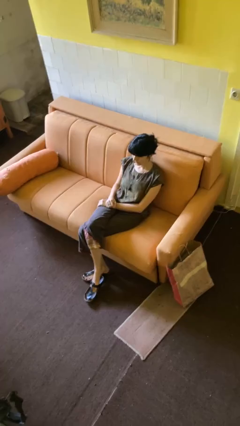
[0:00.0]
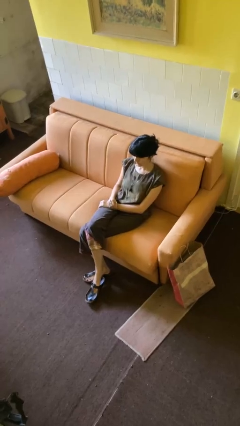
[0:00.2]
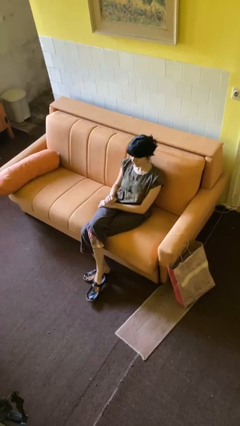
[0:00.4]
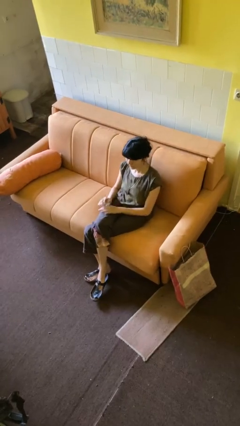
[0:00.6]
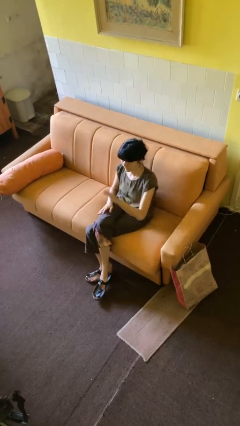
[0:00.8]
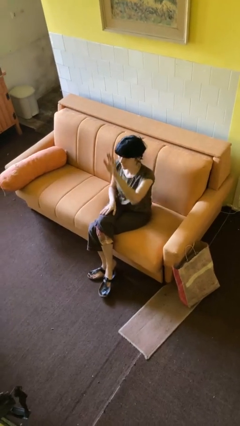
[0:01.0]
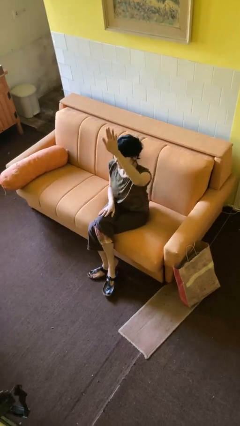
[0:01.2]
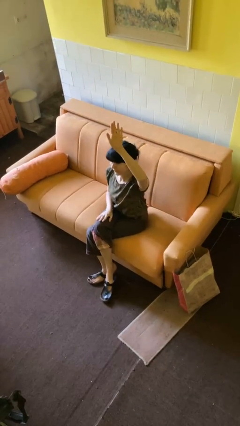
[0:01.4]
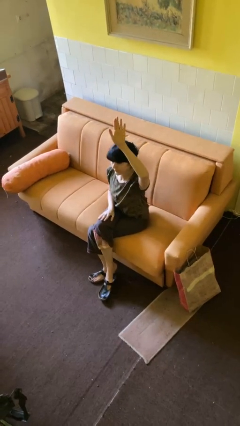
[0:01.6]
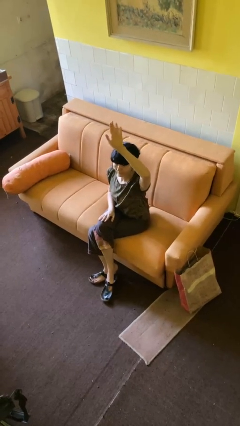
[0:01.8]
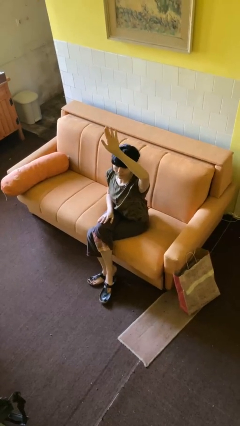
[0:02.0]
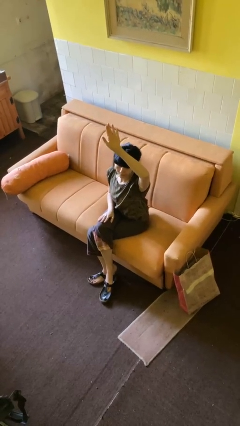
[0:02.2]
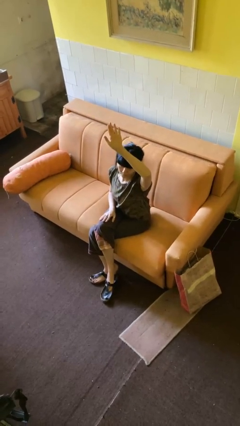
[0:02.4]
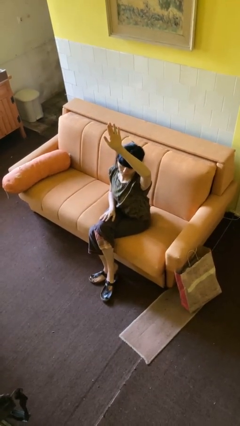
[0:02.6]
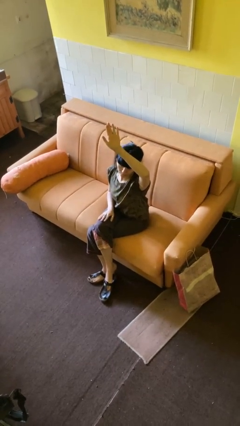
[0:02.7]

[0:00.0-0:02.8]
person gestures raise hand

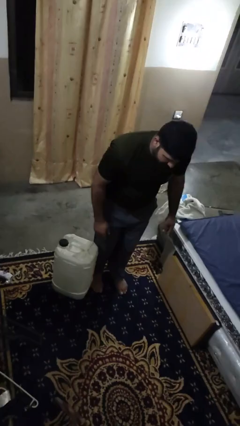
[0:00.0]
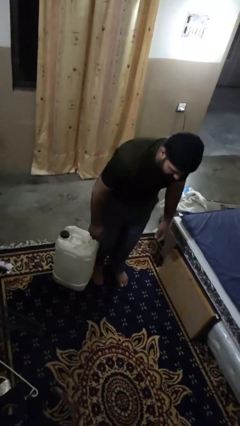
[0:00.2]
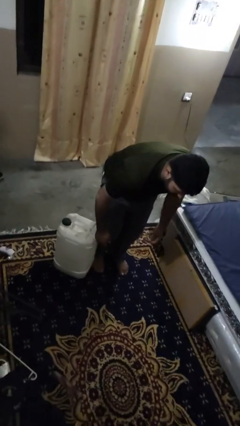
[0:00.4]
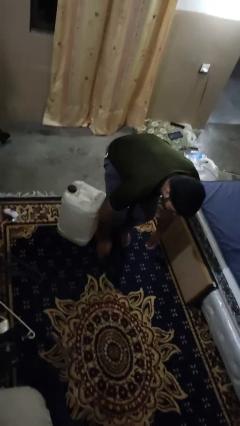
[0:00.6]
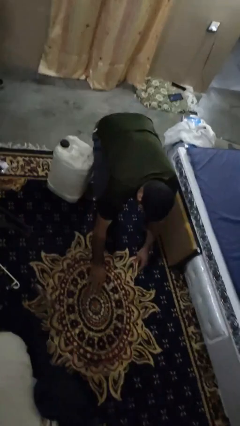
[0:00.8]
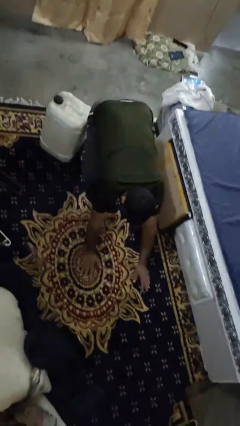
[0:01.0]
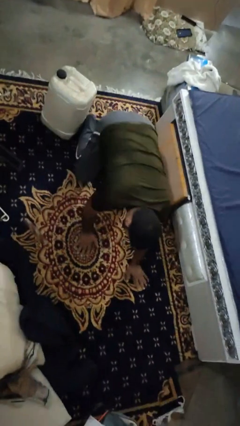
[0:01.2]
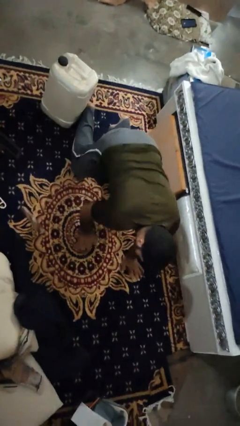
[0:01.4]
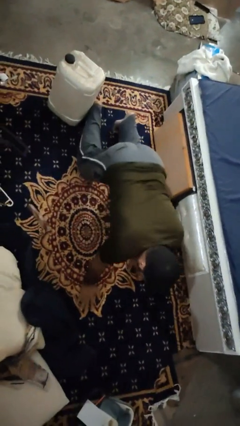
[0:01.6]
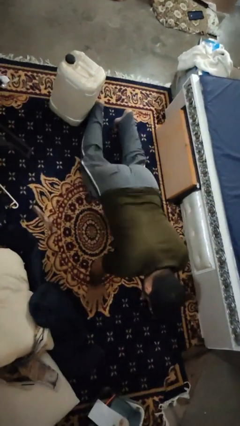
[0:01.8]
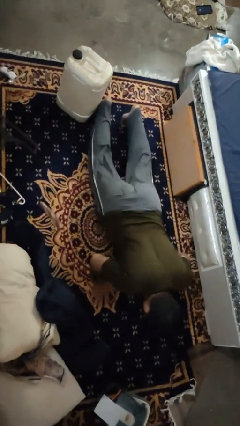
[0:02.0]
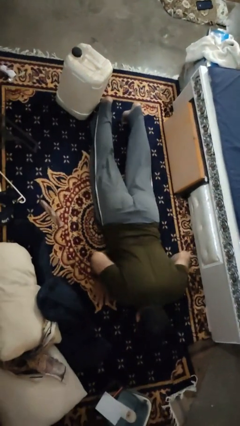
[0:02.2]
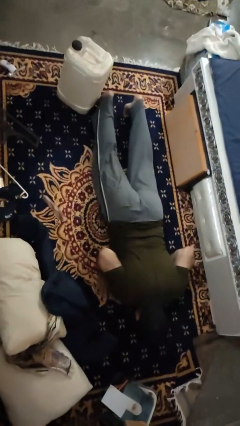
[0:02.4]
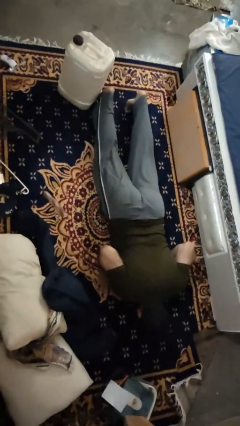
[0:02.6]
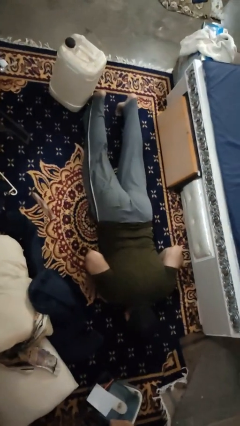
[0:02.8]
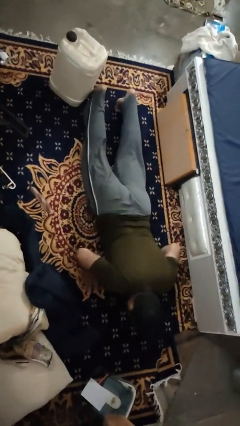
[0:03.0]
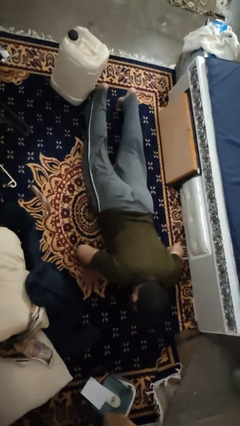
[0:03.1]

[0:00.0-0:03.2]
person lies down on floor

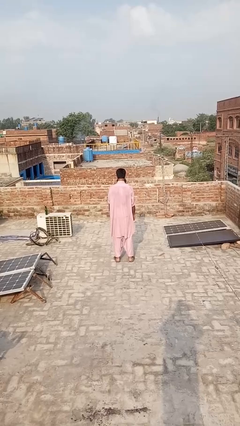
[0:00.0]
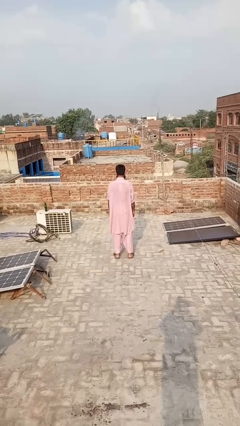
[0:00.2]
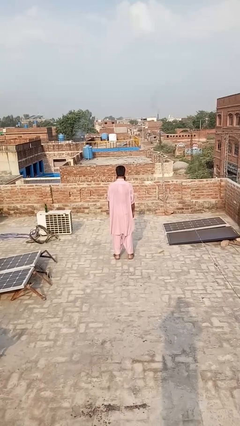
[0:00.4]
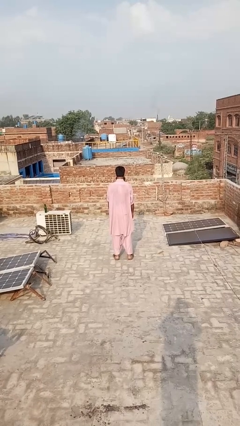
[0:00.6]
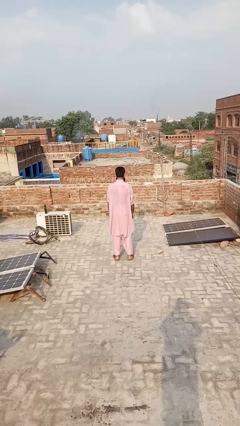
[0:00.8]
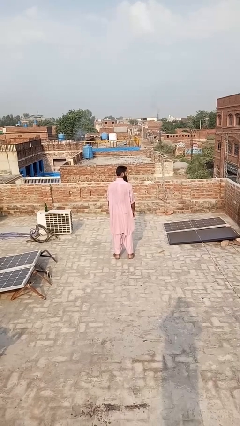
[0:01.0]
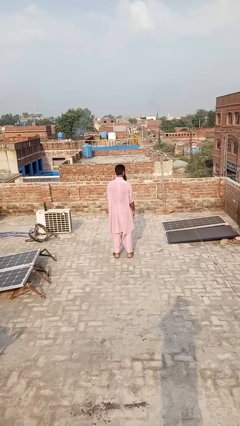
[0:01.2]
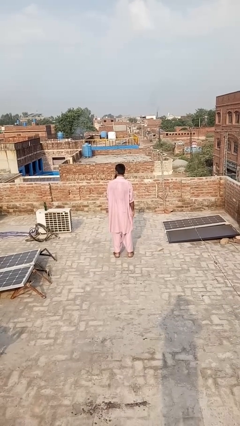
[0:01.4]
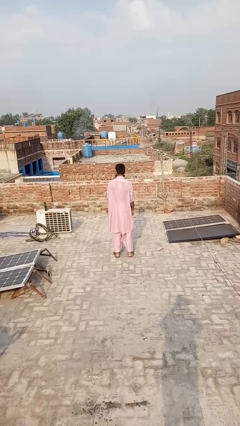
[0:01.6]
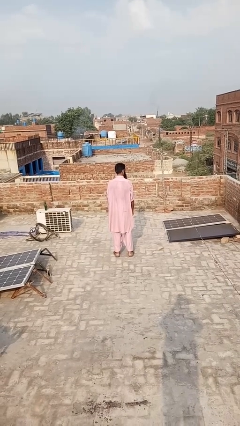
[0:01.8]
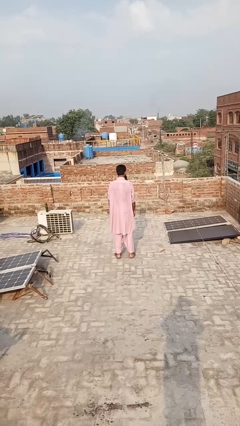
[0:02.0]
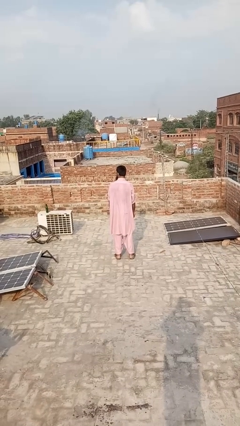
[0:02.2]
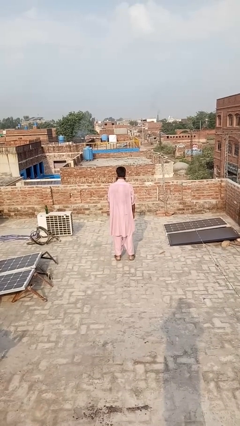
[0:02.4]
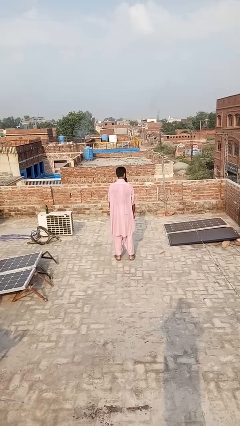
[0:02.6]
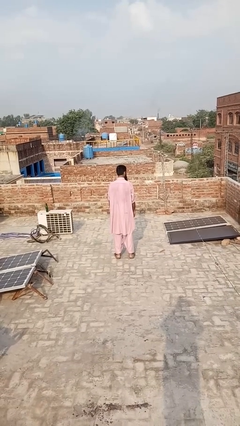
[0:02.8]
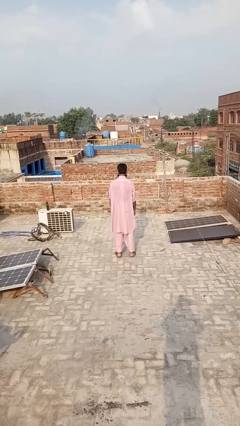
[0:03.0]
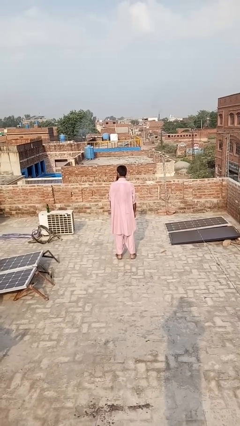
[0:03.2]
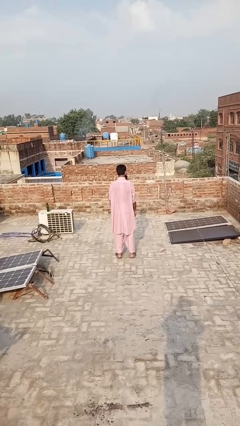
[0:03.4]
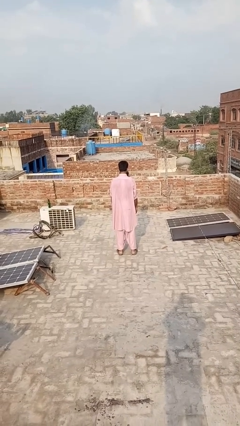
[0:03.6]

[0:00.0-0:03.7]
person shakes head

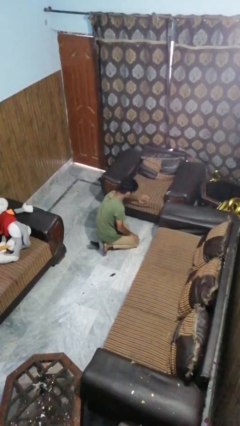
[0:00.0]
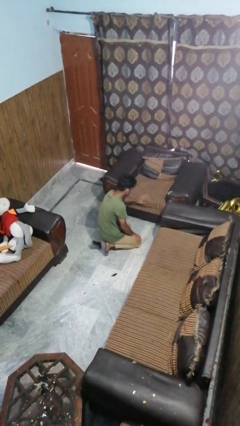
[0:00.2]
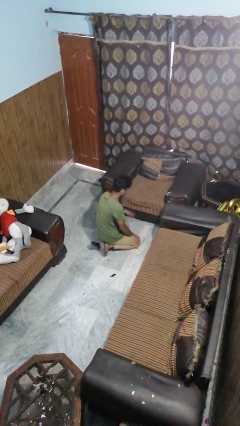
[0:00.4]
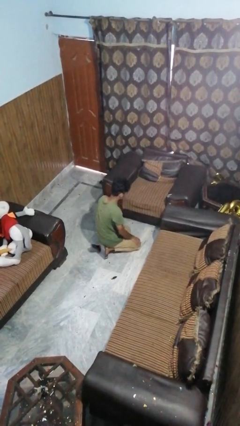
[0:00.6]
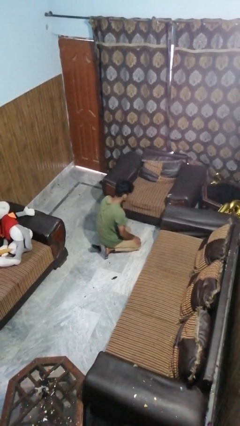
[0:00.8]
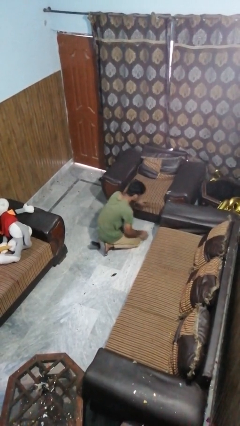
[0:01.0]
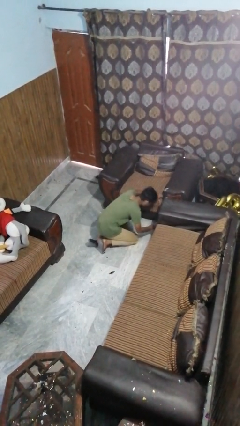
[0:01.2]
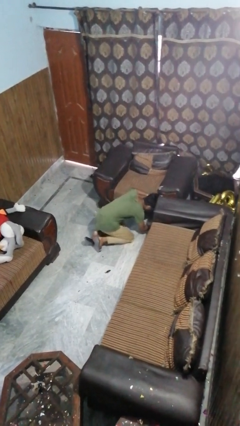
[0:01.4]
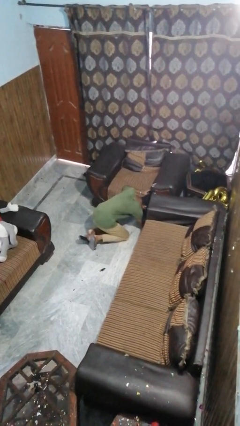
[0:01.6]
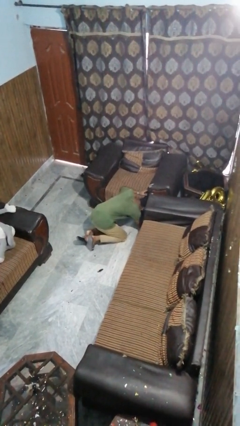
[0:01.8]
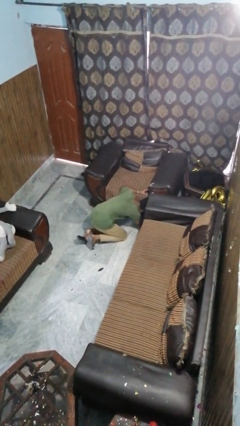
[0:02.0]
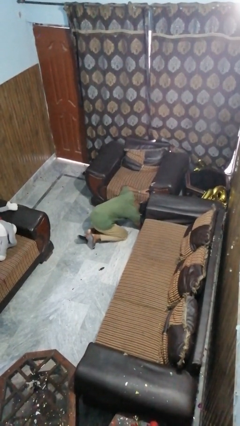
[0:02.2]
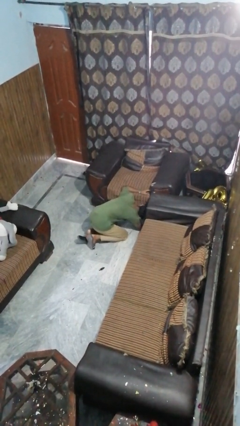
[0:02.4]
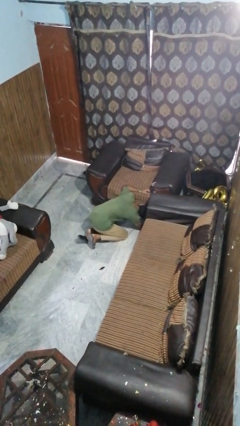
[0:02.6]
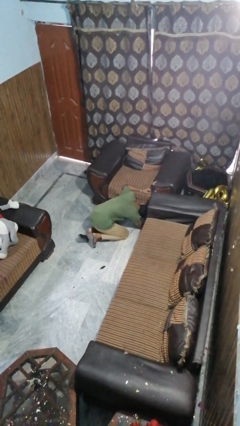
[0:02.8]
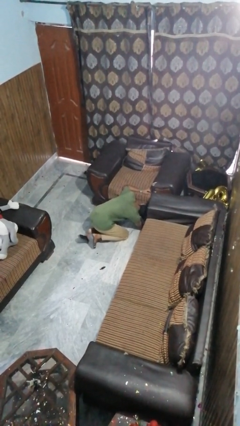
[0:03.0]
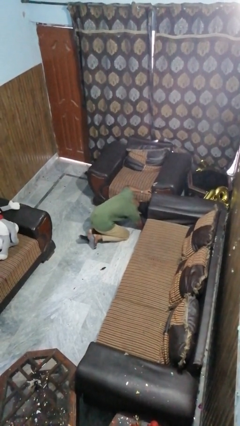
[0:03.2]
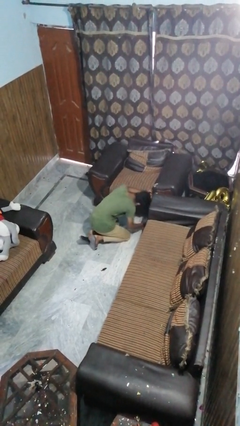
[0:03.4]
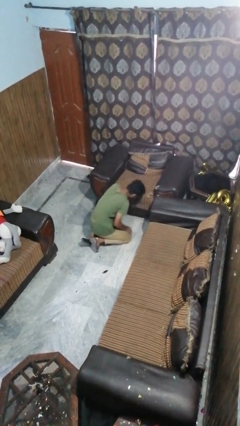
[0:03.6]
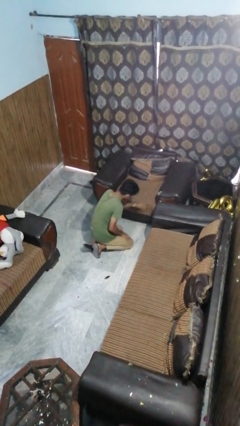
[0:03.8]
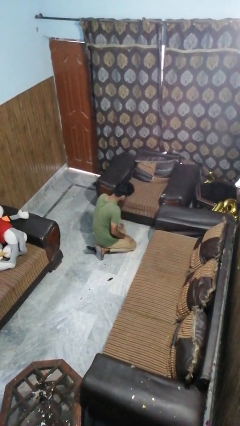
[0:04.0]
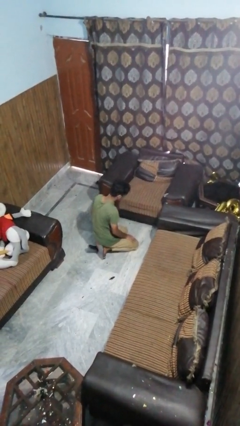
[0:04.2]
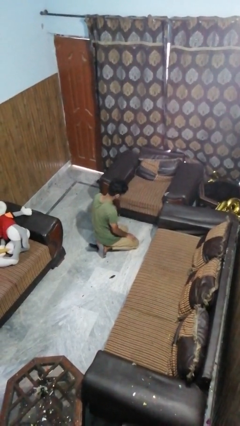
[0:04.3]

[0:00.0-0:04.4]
person searches under couch

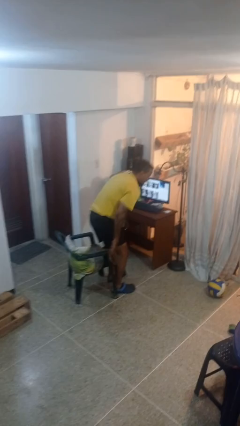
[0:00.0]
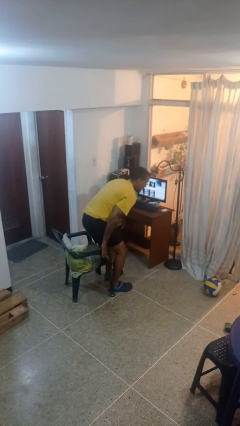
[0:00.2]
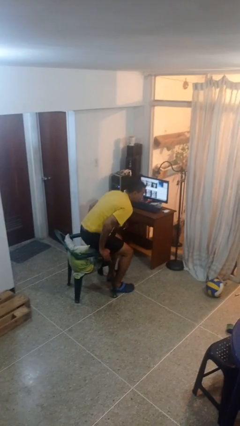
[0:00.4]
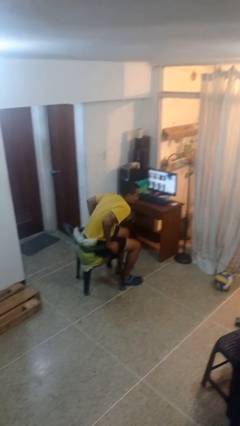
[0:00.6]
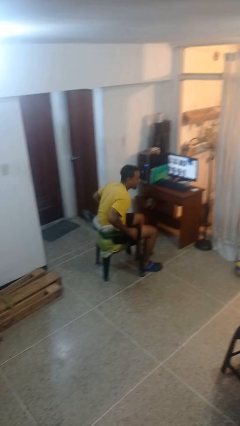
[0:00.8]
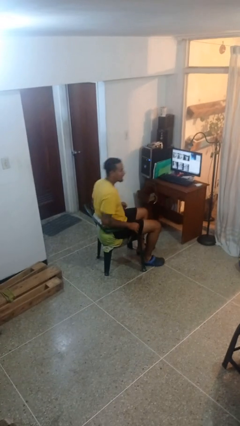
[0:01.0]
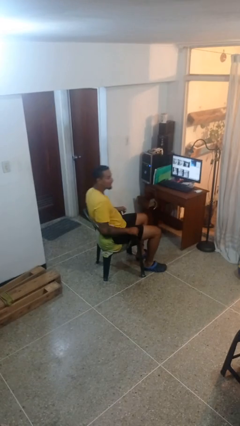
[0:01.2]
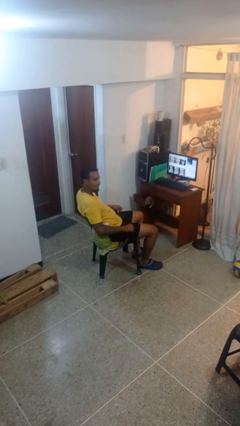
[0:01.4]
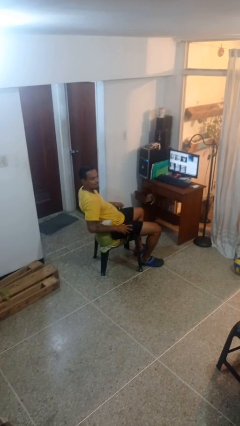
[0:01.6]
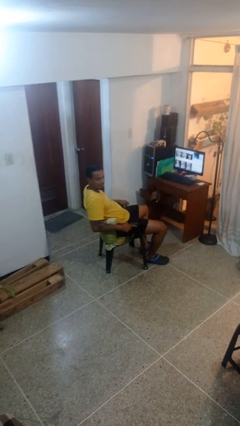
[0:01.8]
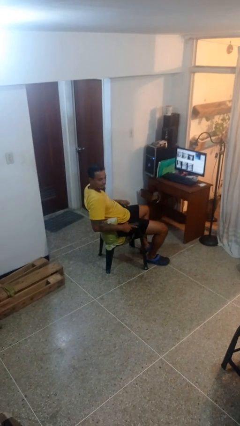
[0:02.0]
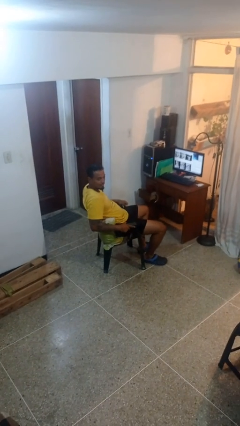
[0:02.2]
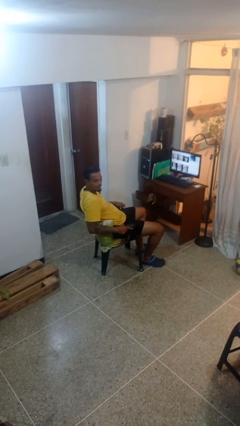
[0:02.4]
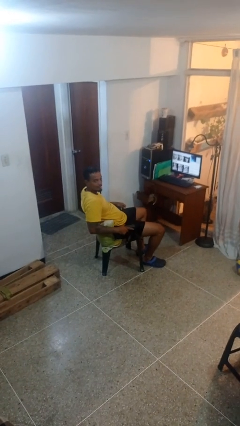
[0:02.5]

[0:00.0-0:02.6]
person sits down

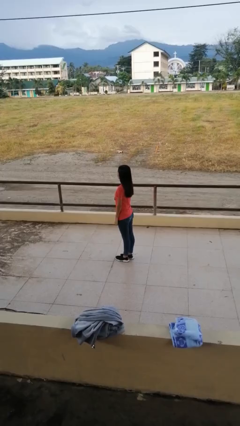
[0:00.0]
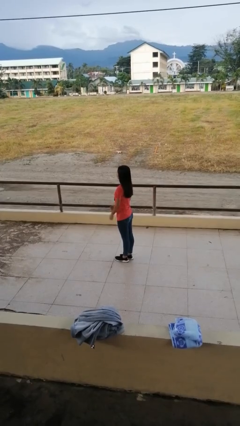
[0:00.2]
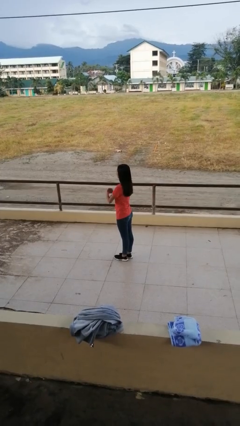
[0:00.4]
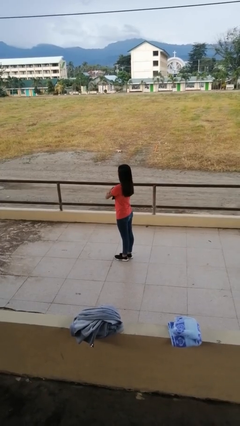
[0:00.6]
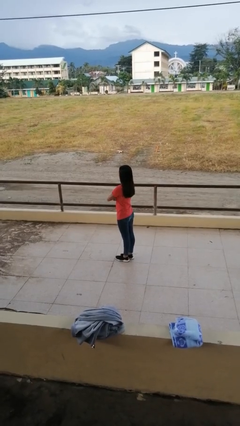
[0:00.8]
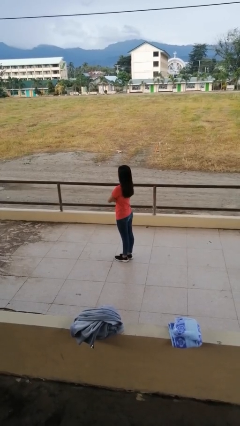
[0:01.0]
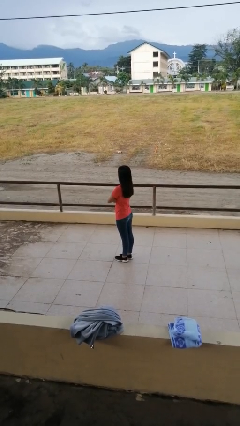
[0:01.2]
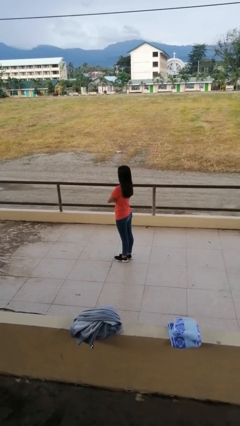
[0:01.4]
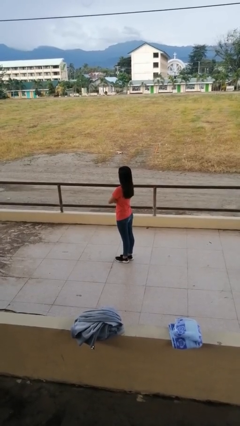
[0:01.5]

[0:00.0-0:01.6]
person crosses arms
